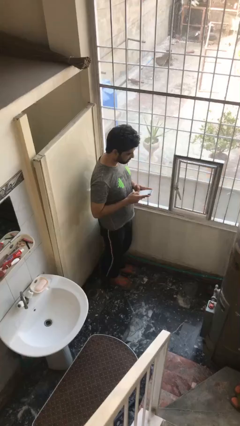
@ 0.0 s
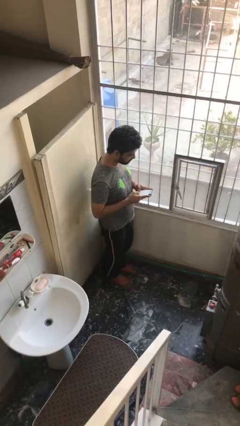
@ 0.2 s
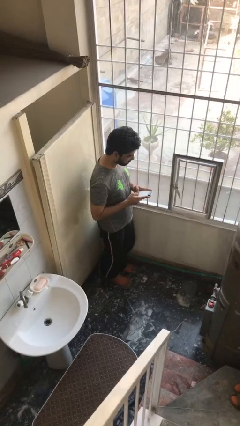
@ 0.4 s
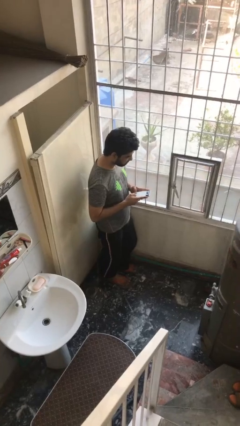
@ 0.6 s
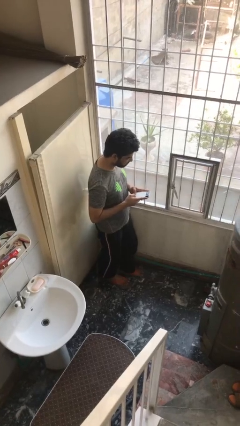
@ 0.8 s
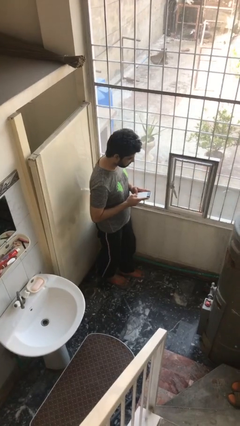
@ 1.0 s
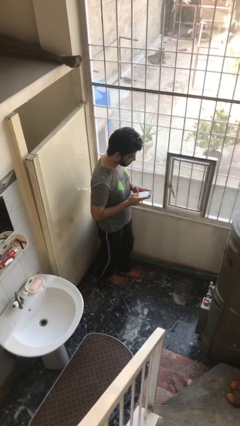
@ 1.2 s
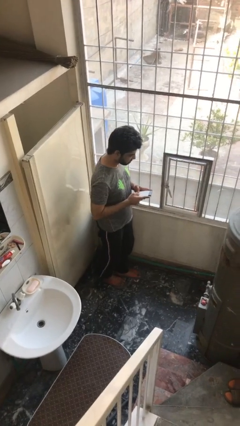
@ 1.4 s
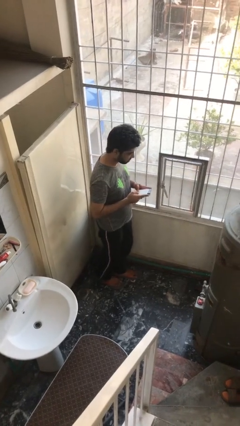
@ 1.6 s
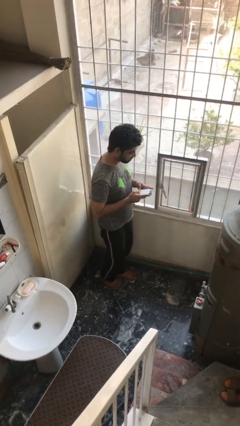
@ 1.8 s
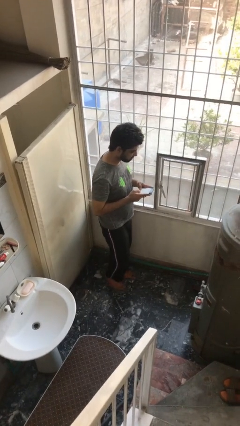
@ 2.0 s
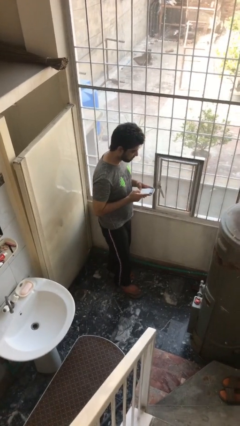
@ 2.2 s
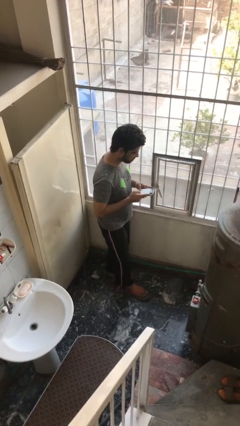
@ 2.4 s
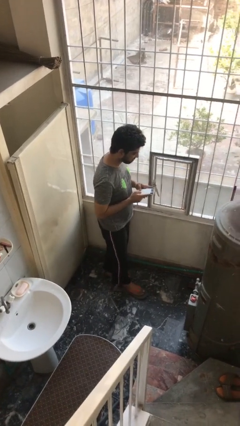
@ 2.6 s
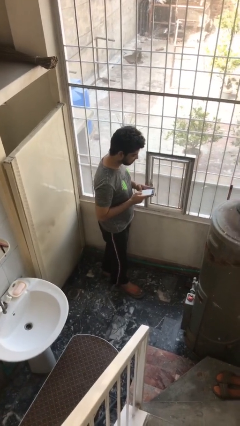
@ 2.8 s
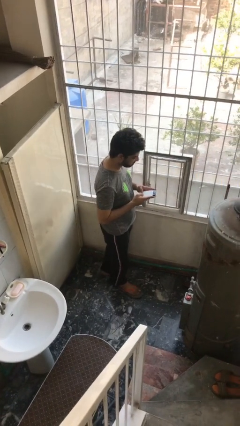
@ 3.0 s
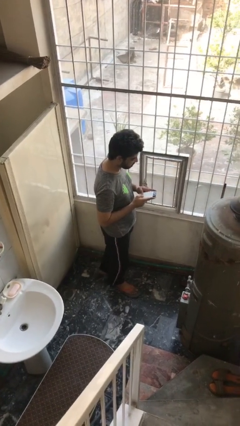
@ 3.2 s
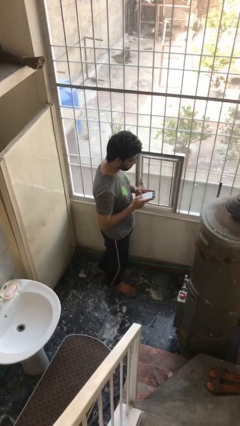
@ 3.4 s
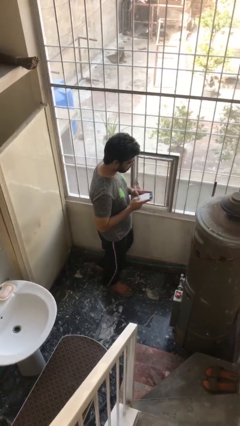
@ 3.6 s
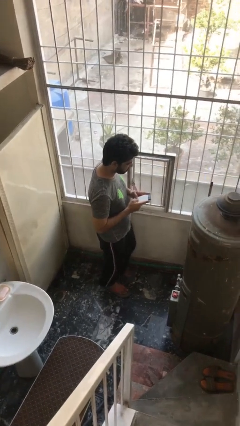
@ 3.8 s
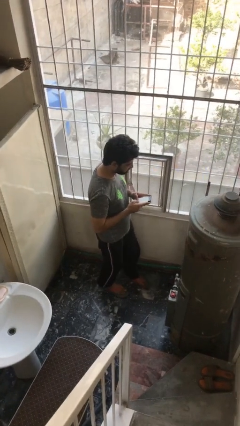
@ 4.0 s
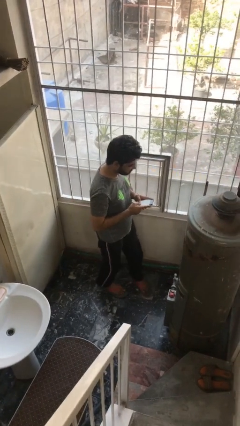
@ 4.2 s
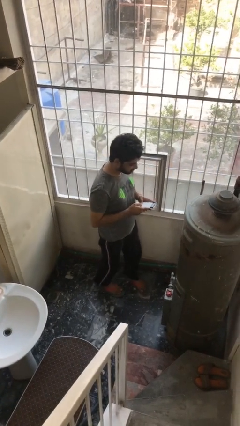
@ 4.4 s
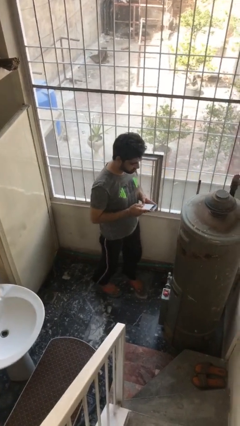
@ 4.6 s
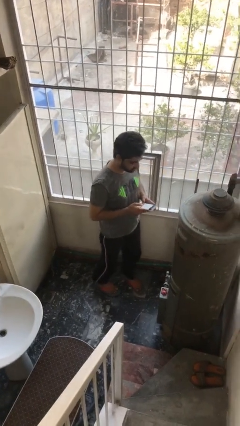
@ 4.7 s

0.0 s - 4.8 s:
person texts on phone

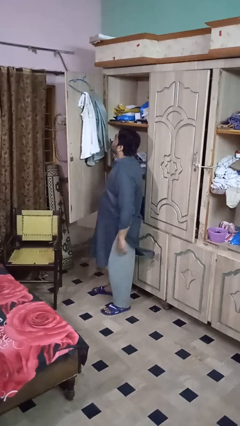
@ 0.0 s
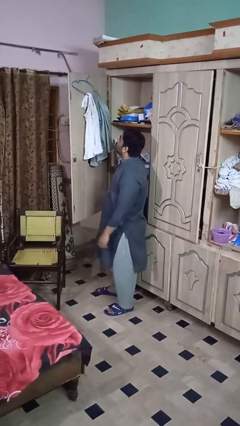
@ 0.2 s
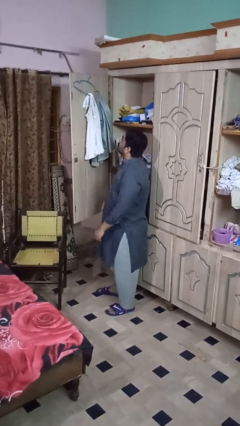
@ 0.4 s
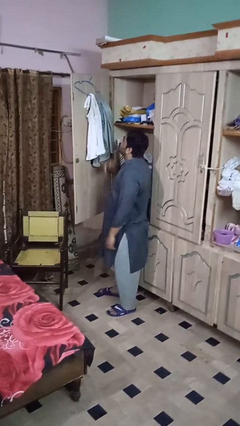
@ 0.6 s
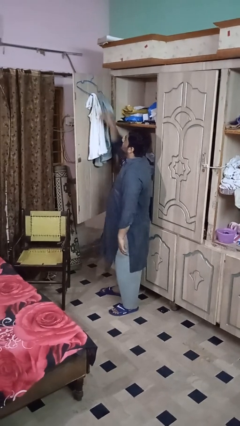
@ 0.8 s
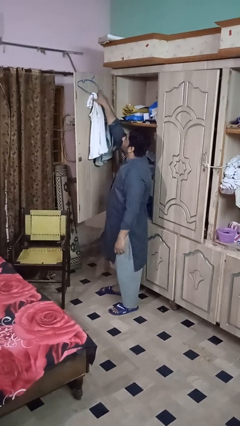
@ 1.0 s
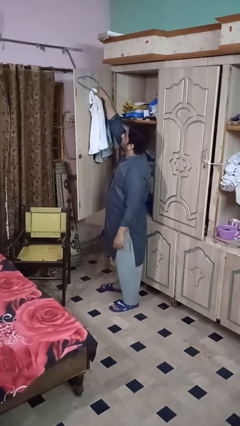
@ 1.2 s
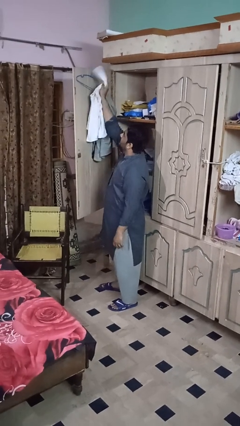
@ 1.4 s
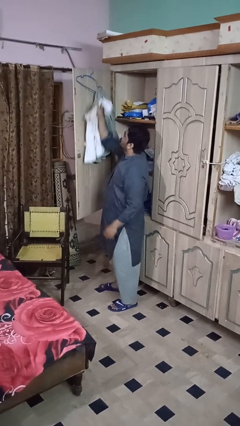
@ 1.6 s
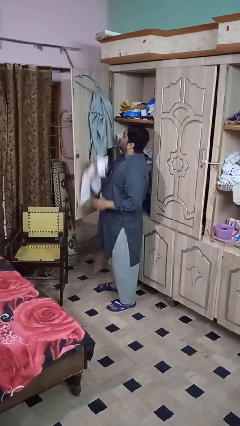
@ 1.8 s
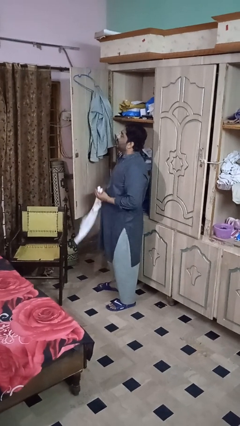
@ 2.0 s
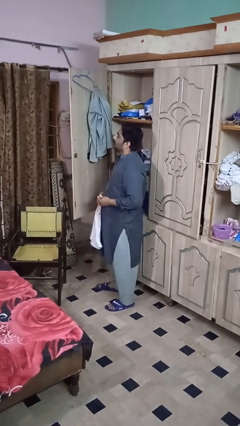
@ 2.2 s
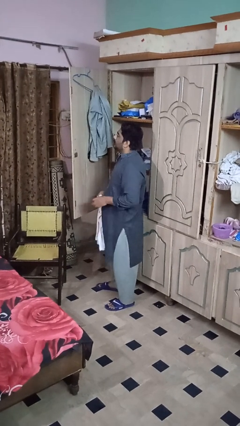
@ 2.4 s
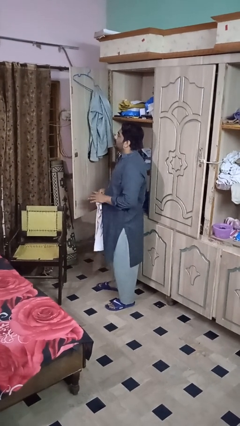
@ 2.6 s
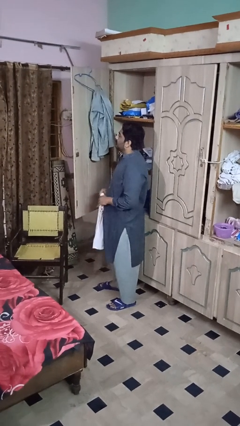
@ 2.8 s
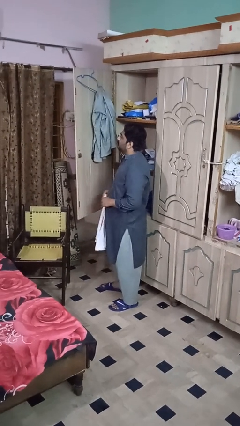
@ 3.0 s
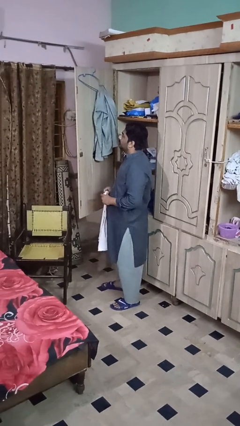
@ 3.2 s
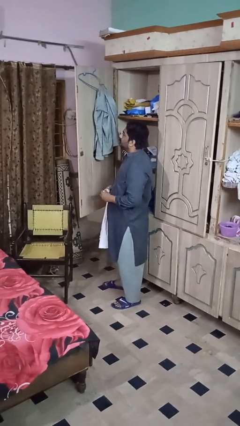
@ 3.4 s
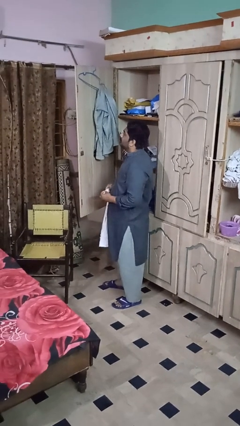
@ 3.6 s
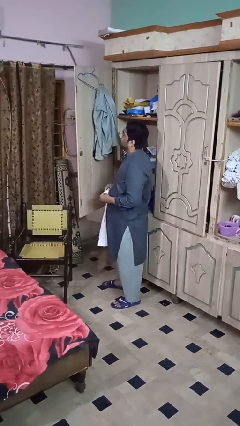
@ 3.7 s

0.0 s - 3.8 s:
person takes clothes from closet

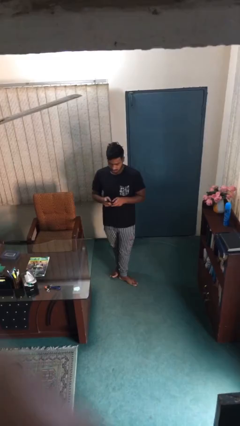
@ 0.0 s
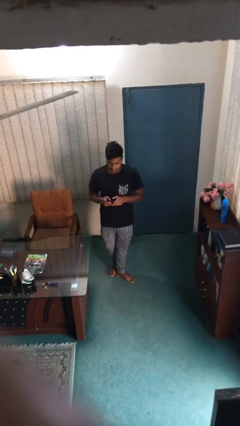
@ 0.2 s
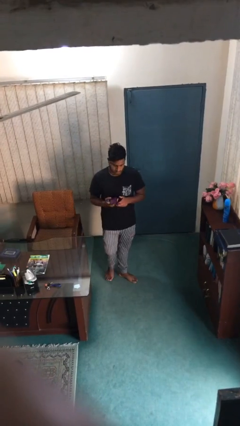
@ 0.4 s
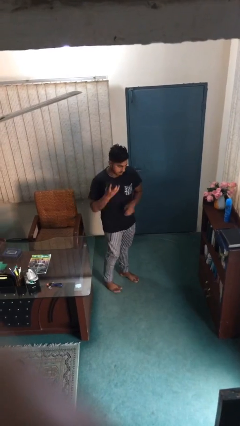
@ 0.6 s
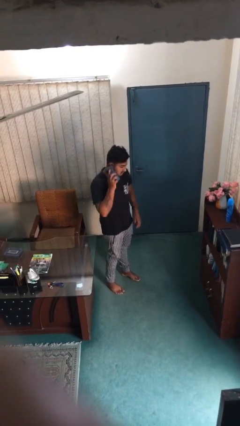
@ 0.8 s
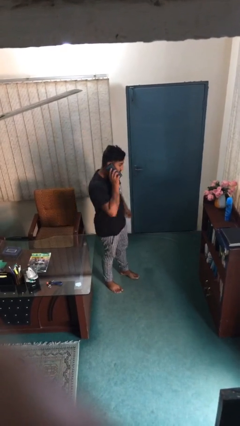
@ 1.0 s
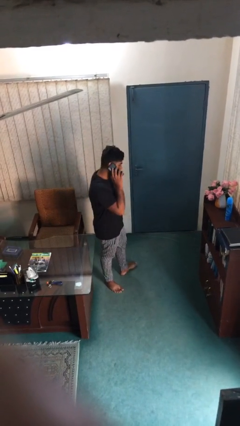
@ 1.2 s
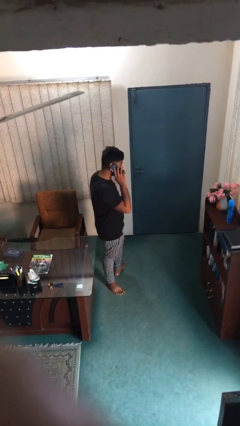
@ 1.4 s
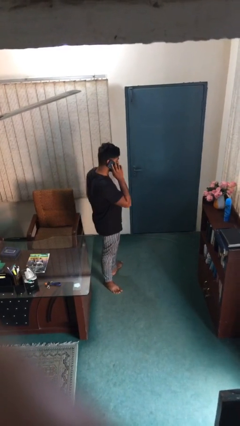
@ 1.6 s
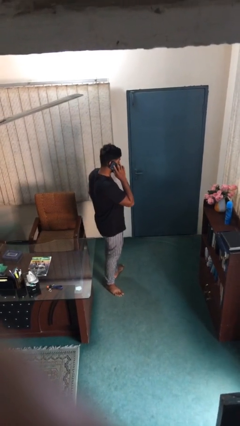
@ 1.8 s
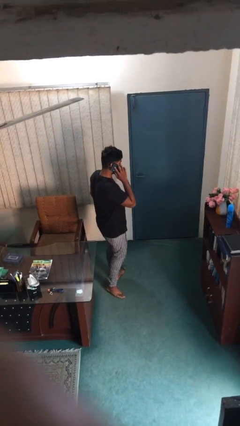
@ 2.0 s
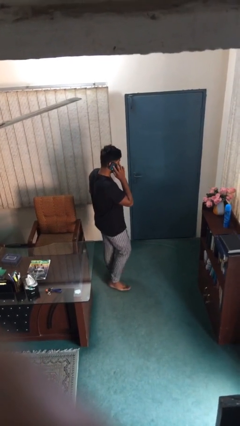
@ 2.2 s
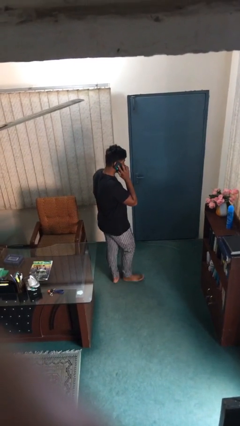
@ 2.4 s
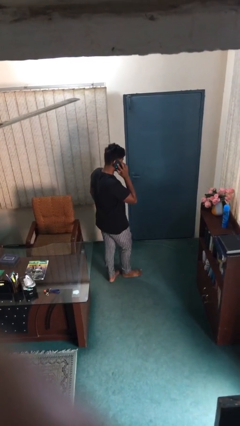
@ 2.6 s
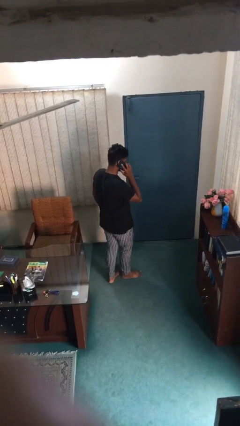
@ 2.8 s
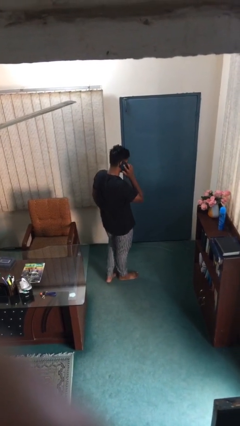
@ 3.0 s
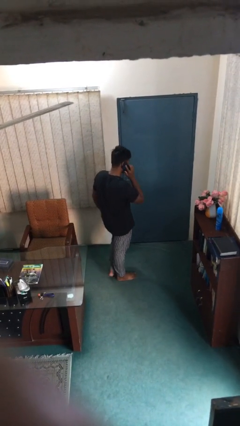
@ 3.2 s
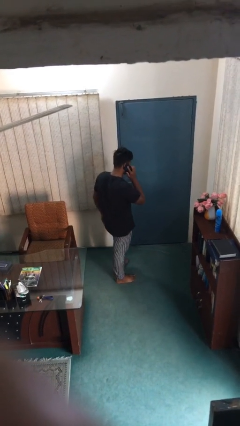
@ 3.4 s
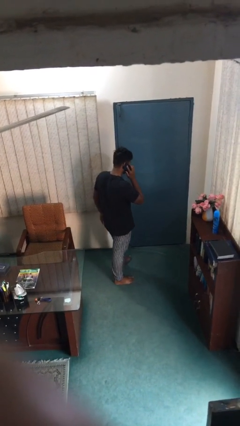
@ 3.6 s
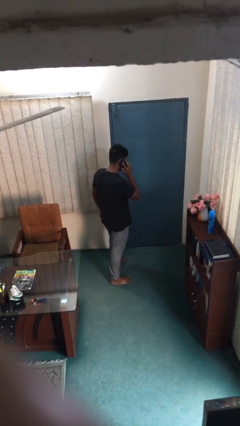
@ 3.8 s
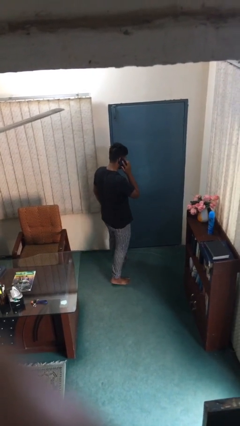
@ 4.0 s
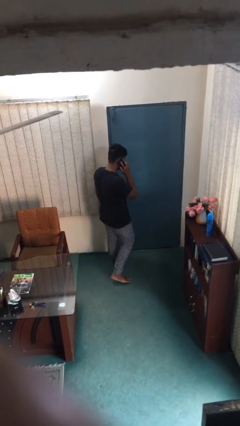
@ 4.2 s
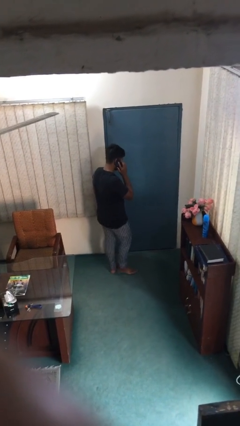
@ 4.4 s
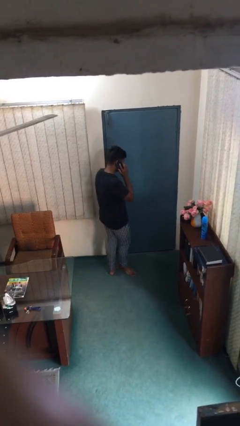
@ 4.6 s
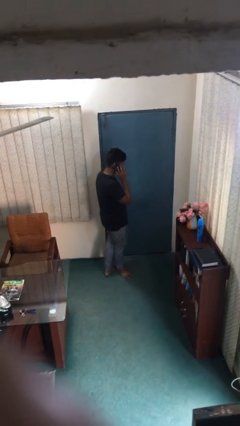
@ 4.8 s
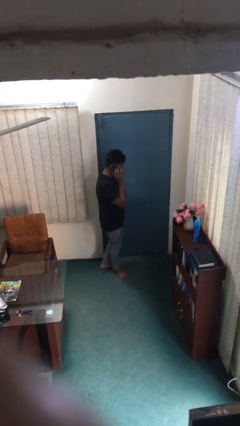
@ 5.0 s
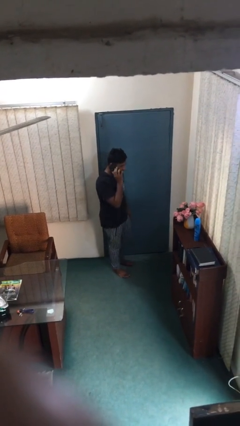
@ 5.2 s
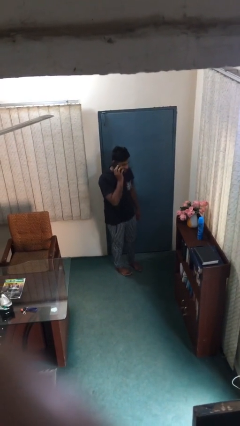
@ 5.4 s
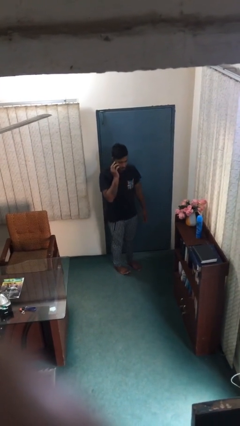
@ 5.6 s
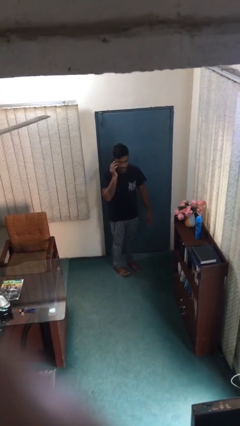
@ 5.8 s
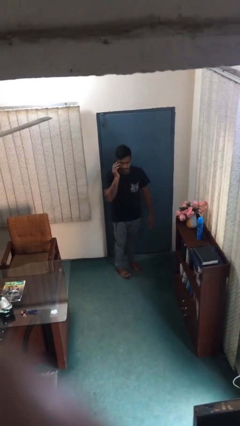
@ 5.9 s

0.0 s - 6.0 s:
person talks on phone

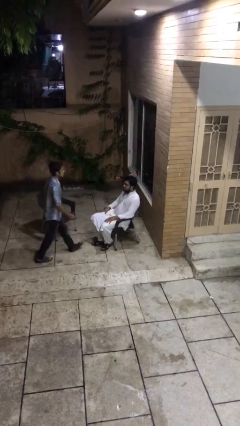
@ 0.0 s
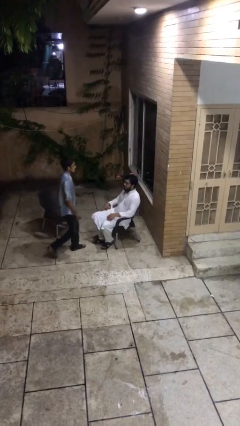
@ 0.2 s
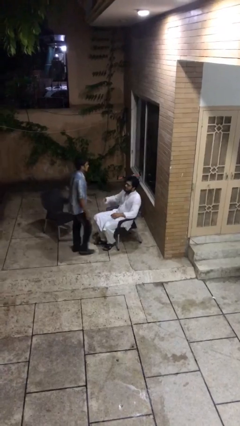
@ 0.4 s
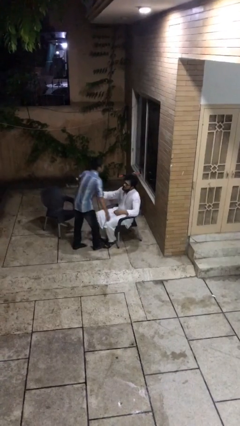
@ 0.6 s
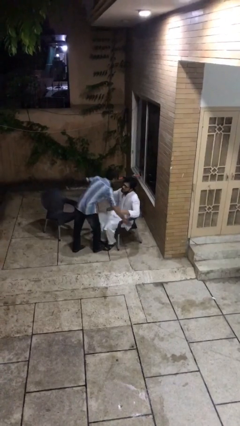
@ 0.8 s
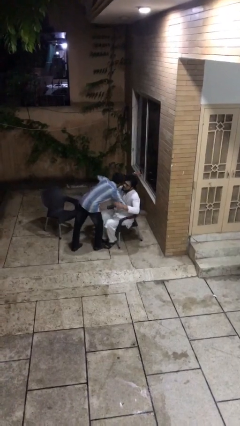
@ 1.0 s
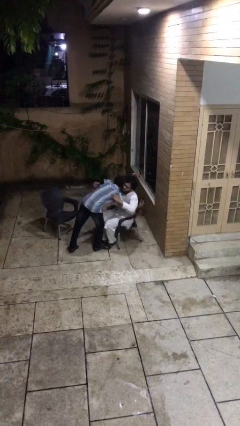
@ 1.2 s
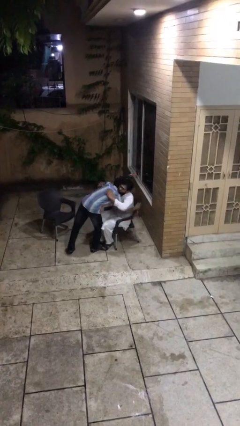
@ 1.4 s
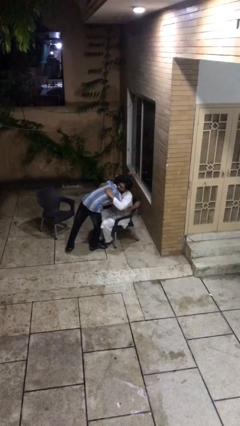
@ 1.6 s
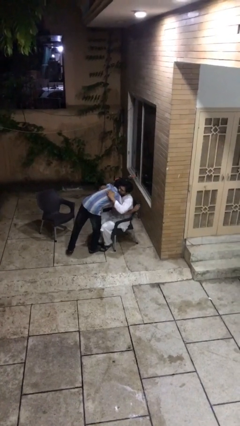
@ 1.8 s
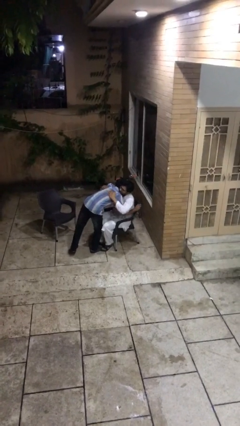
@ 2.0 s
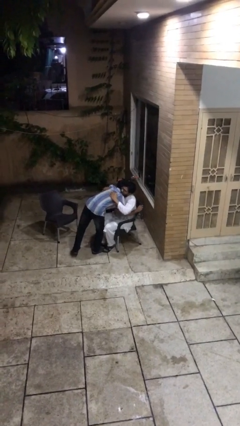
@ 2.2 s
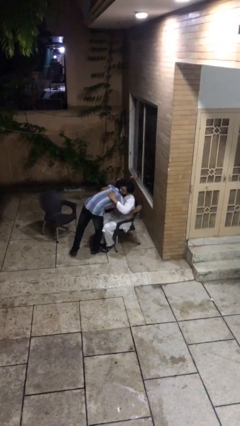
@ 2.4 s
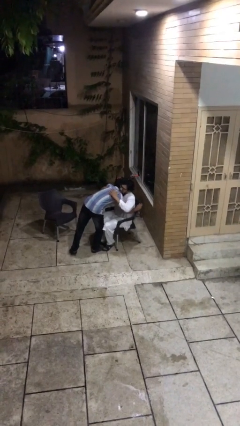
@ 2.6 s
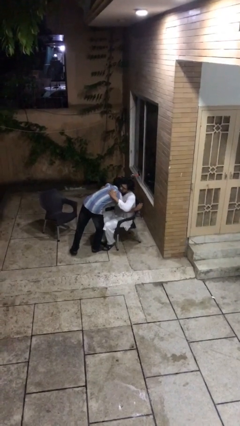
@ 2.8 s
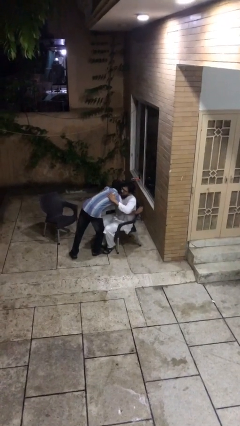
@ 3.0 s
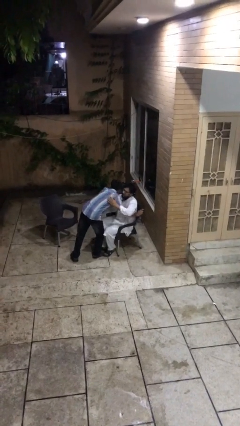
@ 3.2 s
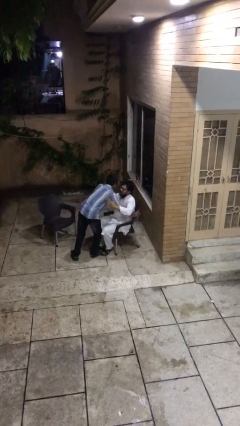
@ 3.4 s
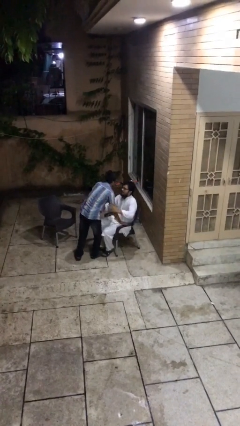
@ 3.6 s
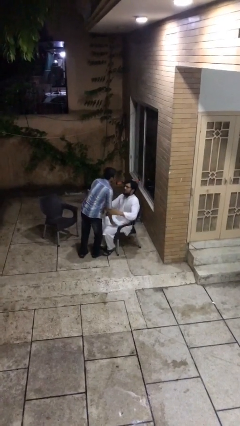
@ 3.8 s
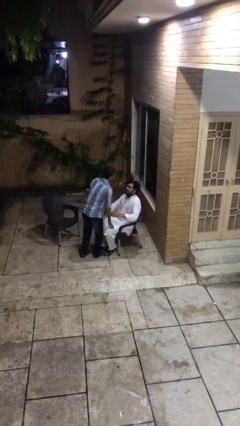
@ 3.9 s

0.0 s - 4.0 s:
person embraces person
